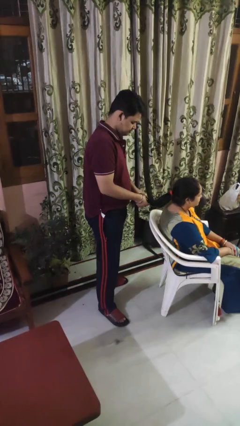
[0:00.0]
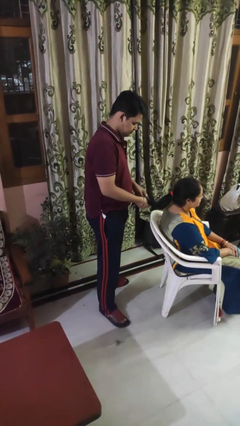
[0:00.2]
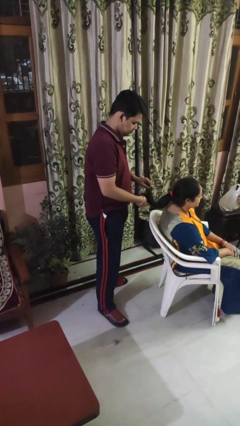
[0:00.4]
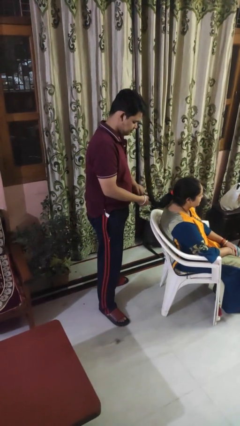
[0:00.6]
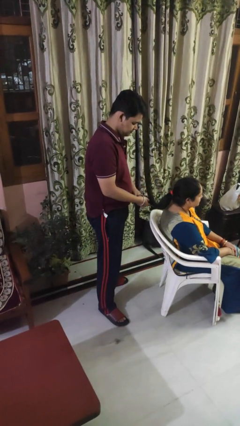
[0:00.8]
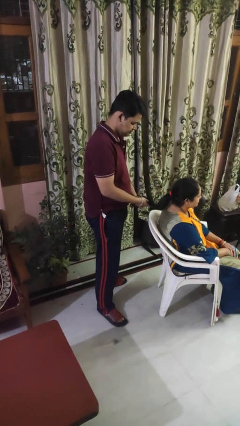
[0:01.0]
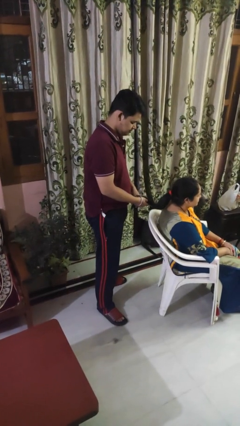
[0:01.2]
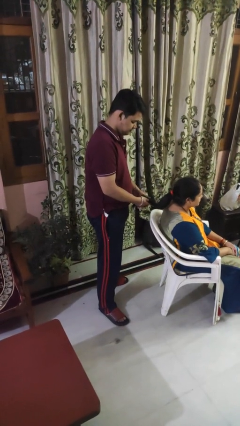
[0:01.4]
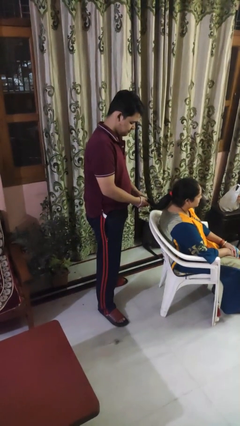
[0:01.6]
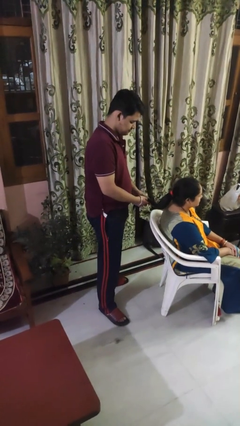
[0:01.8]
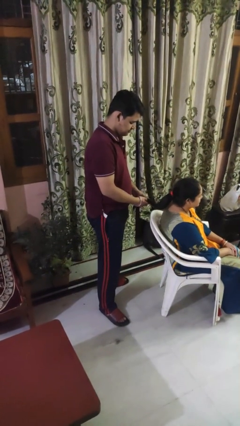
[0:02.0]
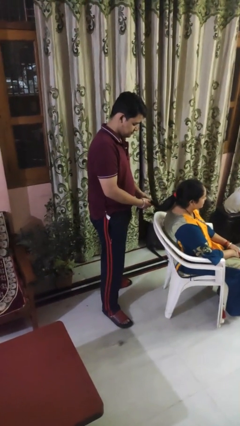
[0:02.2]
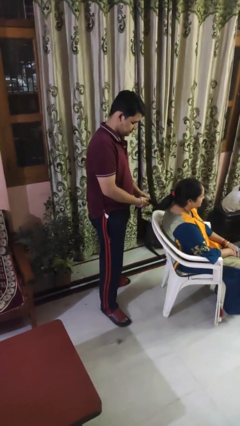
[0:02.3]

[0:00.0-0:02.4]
person braids hair of person

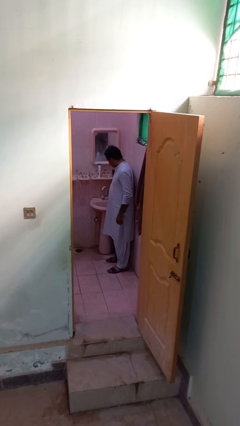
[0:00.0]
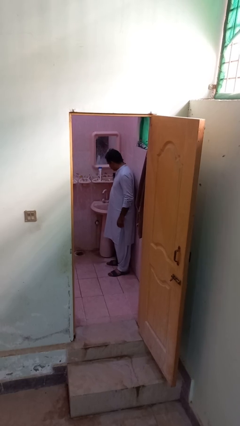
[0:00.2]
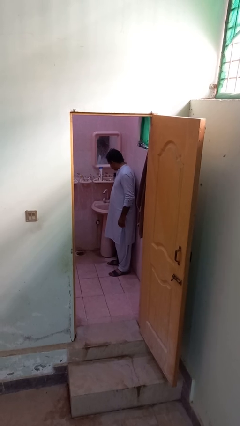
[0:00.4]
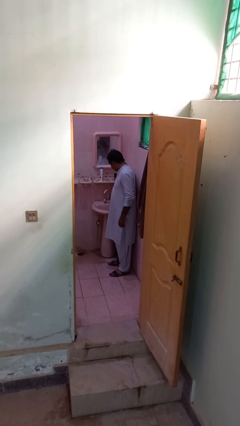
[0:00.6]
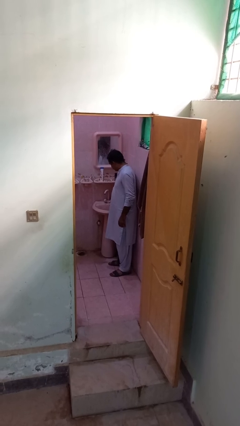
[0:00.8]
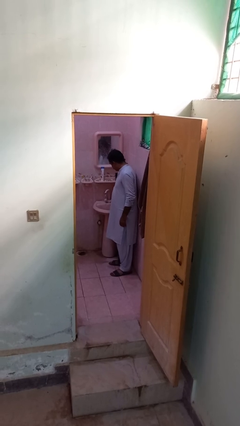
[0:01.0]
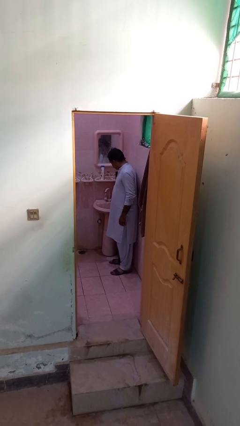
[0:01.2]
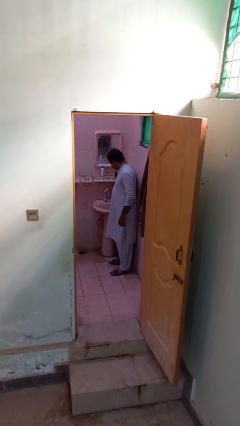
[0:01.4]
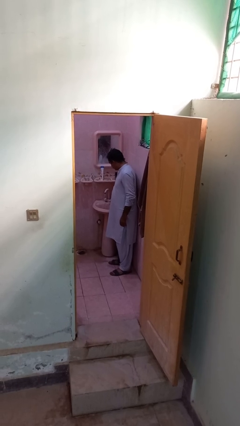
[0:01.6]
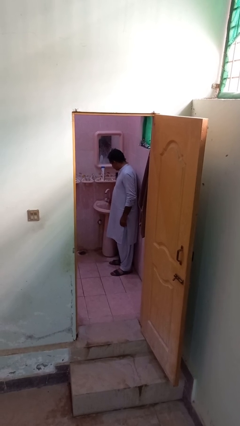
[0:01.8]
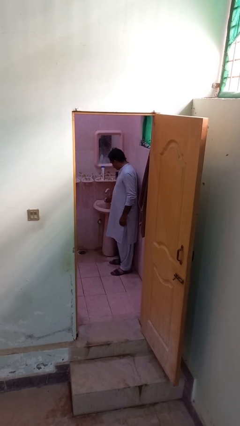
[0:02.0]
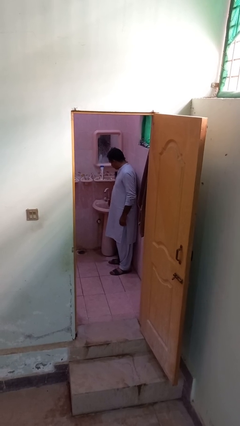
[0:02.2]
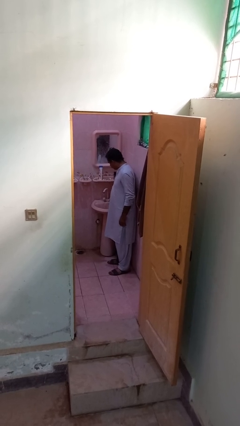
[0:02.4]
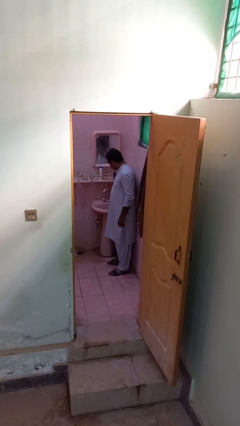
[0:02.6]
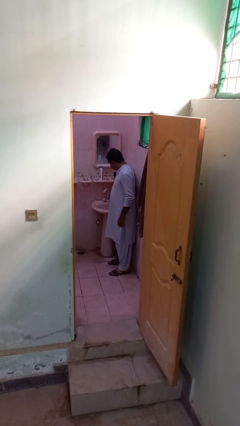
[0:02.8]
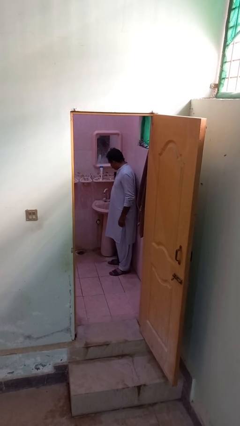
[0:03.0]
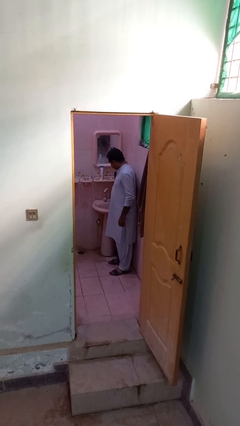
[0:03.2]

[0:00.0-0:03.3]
person turns on faucet

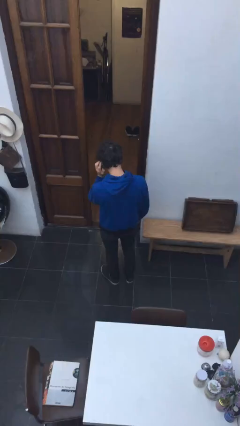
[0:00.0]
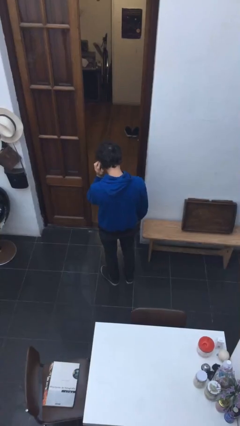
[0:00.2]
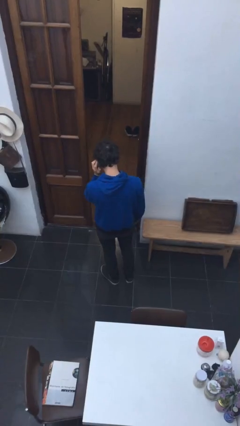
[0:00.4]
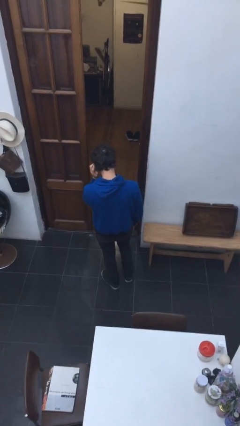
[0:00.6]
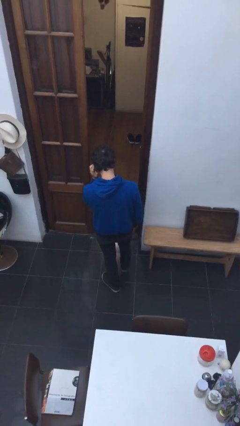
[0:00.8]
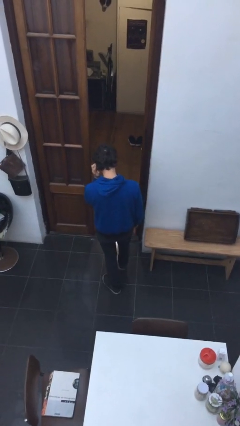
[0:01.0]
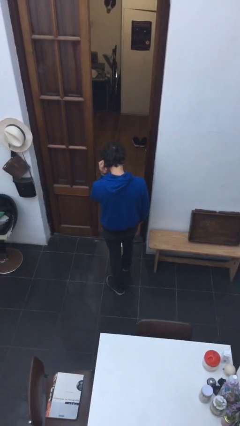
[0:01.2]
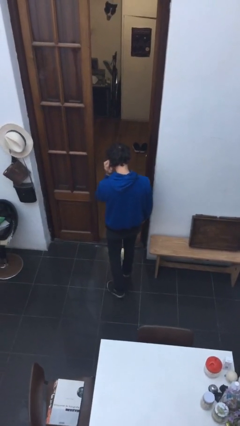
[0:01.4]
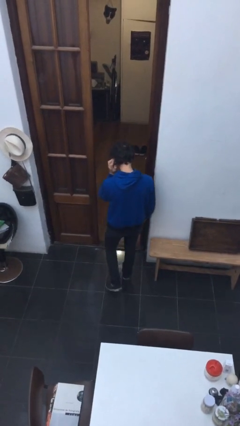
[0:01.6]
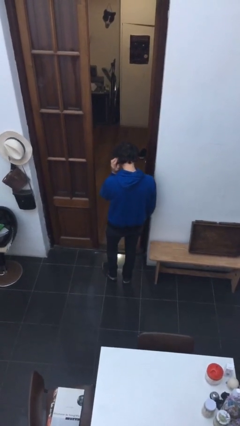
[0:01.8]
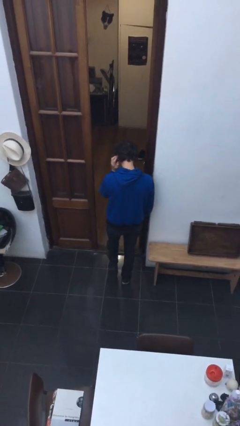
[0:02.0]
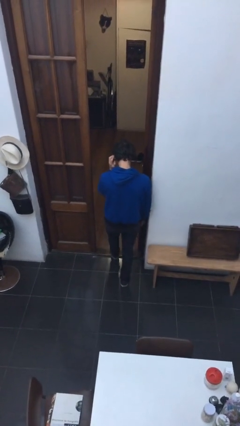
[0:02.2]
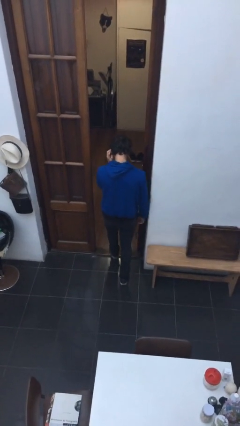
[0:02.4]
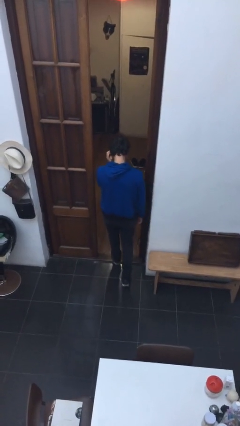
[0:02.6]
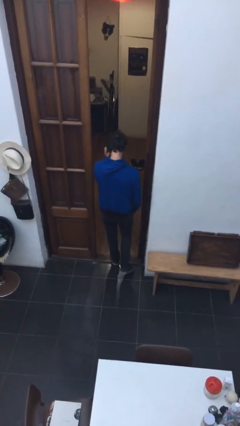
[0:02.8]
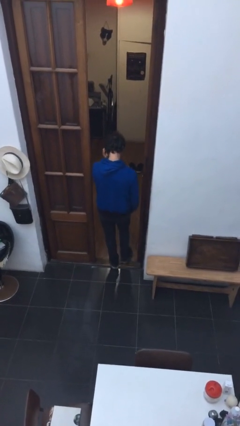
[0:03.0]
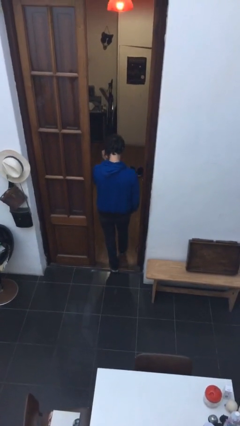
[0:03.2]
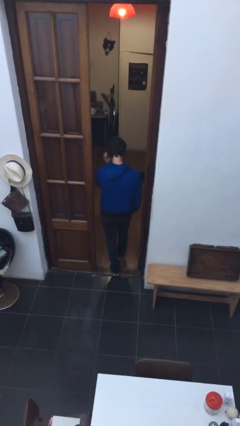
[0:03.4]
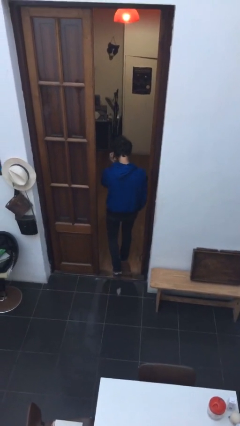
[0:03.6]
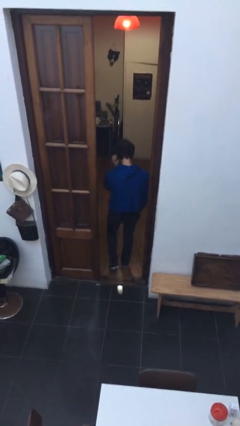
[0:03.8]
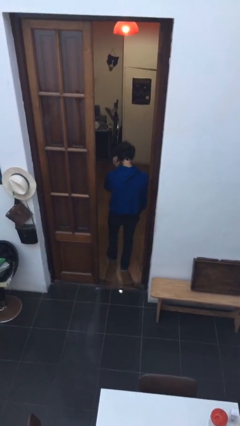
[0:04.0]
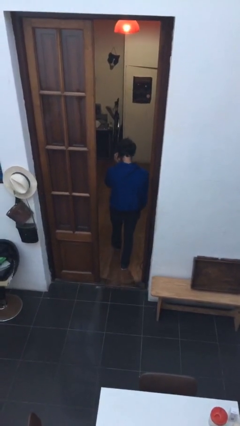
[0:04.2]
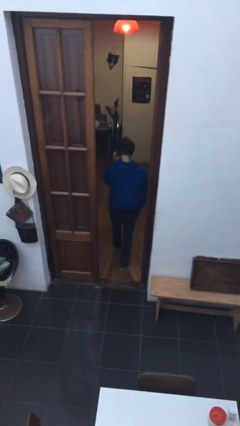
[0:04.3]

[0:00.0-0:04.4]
person exits scene through structure

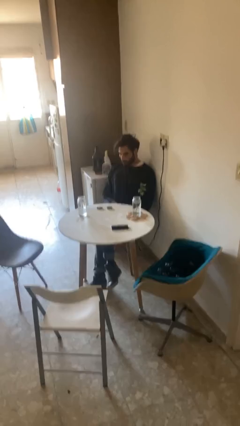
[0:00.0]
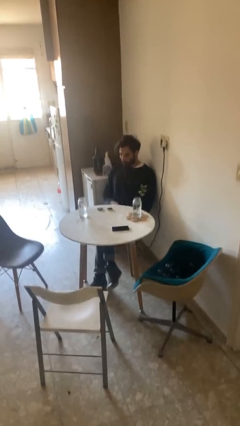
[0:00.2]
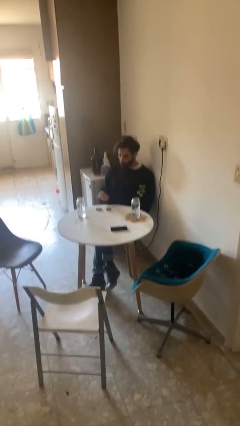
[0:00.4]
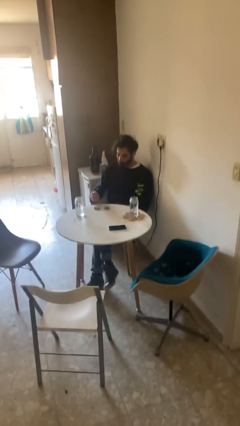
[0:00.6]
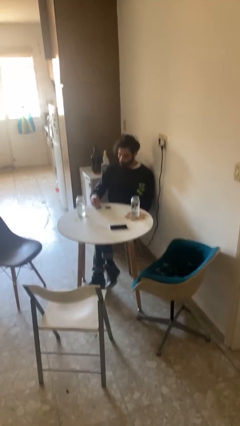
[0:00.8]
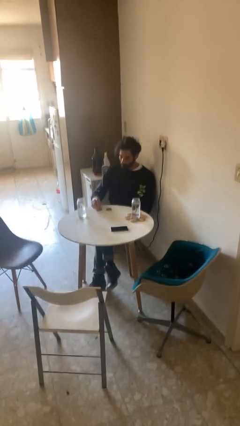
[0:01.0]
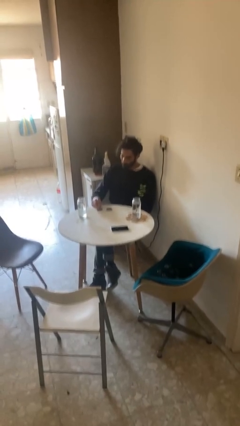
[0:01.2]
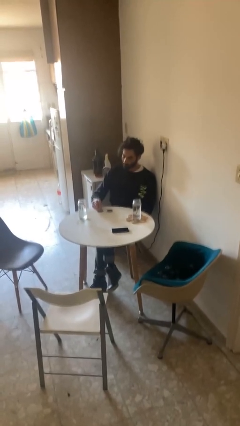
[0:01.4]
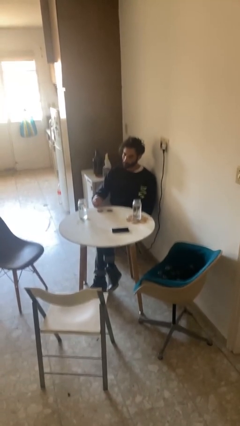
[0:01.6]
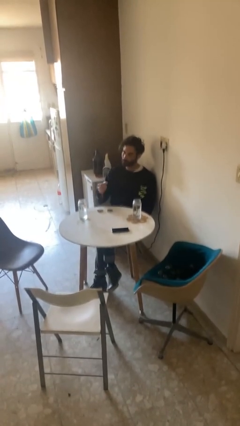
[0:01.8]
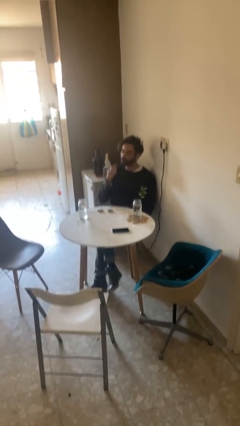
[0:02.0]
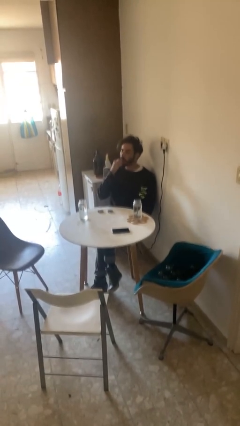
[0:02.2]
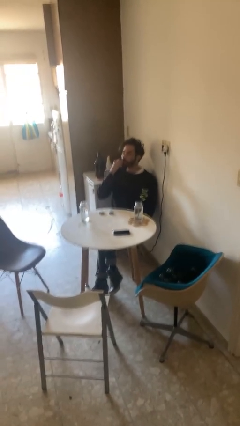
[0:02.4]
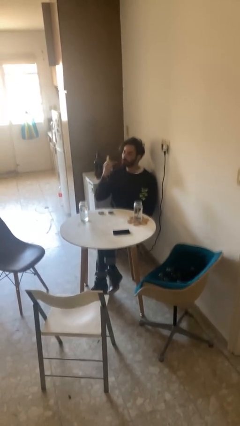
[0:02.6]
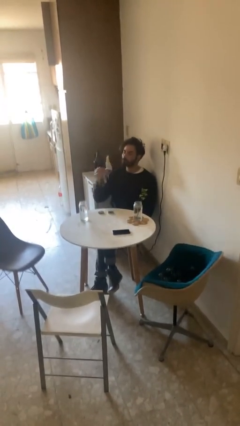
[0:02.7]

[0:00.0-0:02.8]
person takes medicine pills

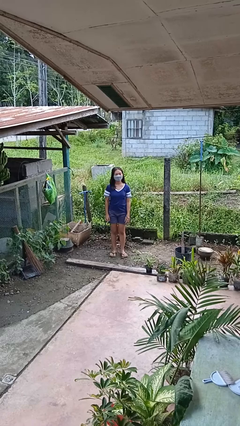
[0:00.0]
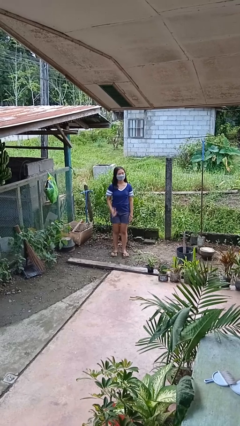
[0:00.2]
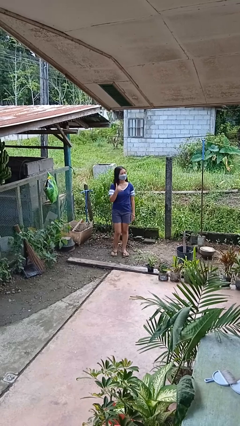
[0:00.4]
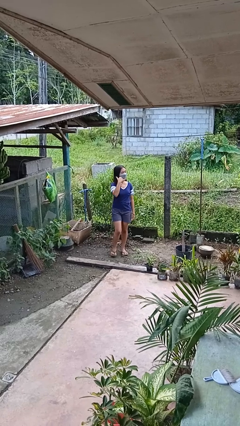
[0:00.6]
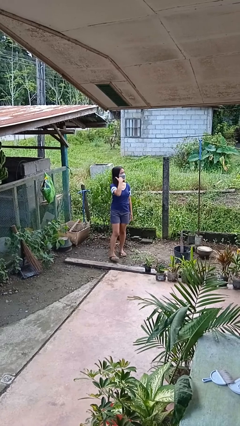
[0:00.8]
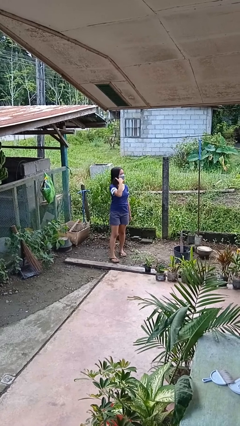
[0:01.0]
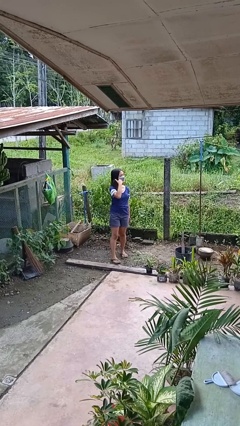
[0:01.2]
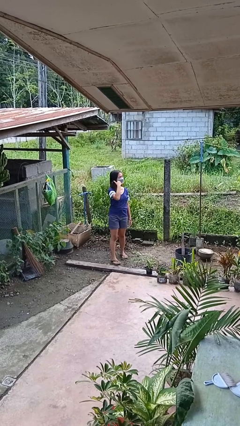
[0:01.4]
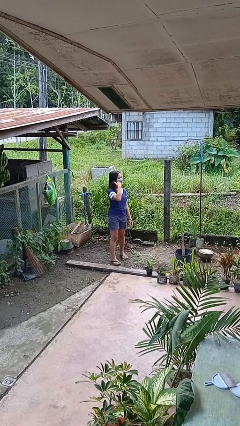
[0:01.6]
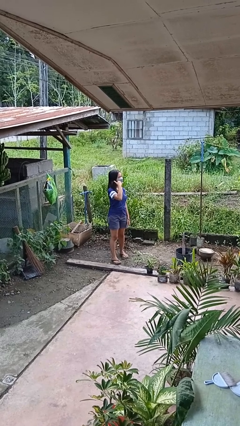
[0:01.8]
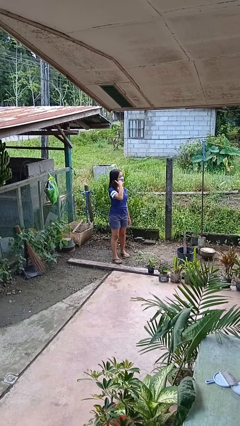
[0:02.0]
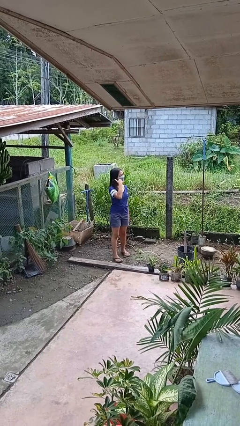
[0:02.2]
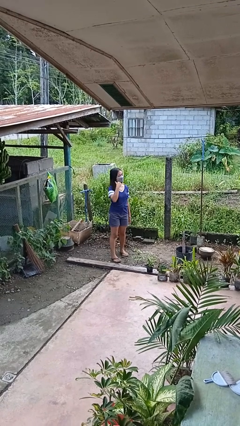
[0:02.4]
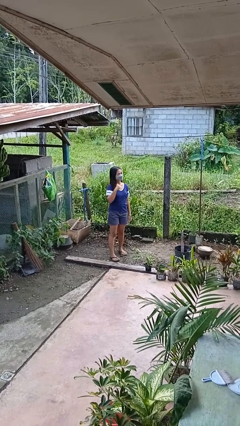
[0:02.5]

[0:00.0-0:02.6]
person gestures call me

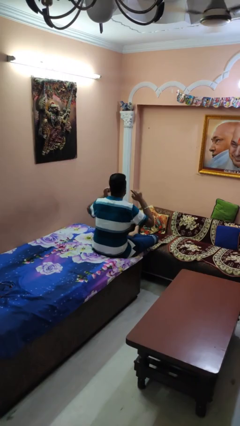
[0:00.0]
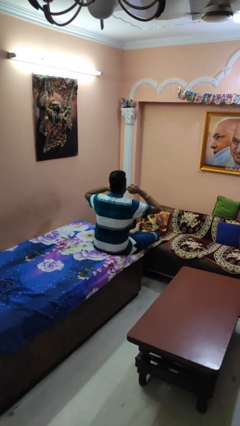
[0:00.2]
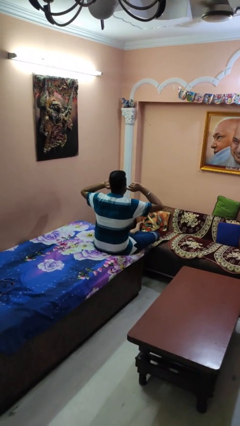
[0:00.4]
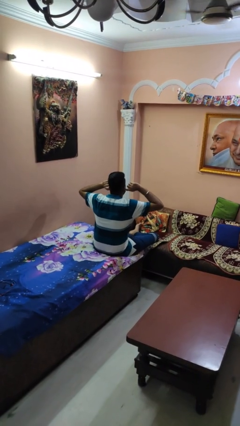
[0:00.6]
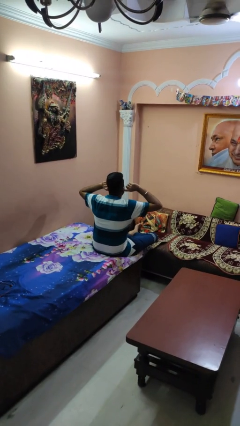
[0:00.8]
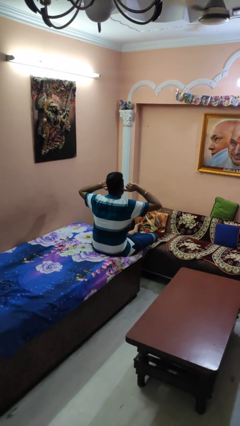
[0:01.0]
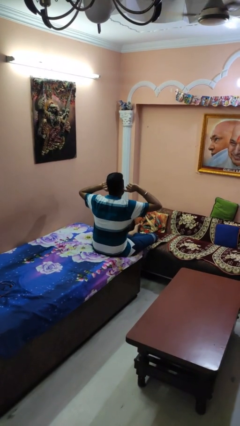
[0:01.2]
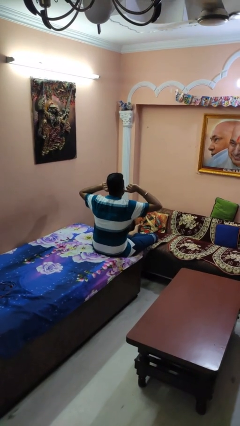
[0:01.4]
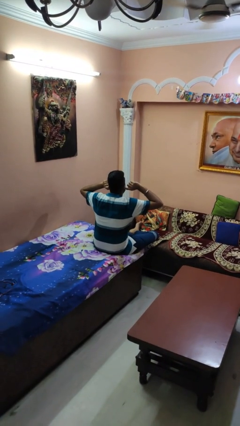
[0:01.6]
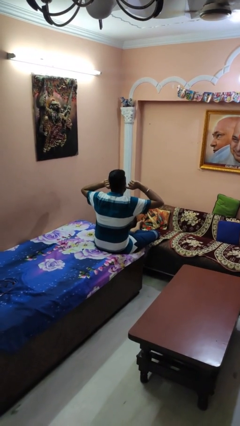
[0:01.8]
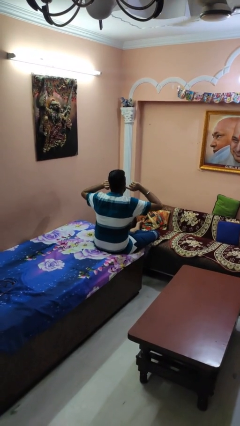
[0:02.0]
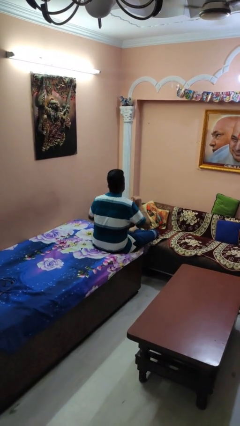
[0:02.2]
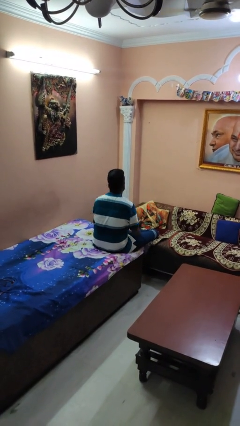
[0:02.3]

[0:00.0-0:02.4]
person puts fingers in ear
